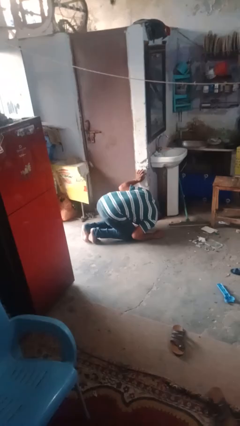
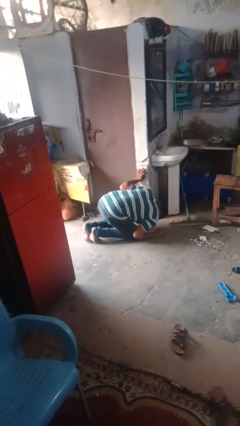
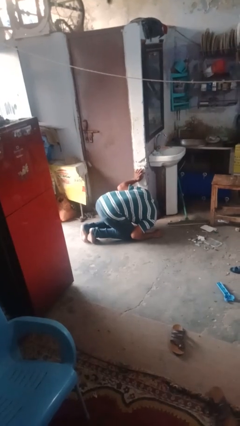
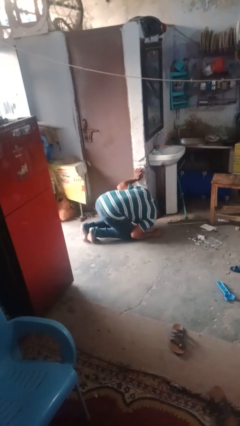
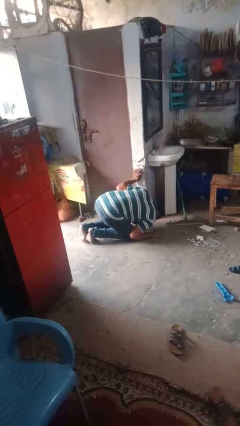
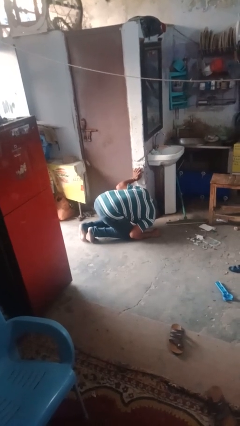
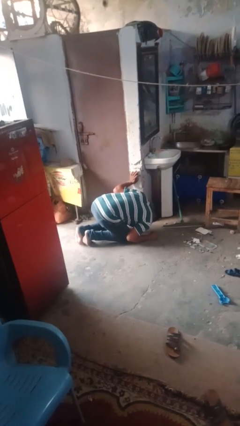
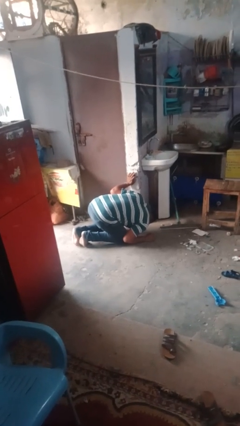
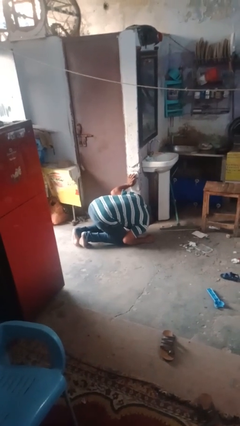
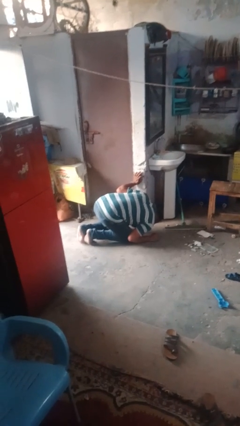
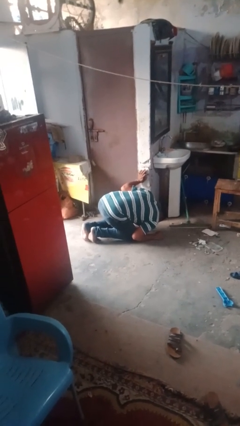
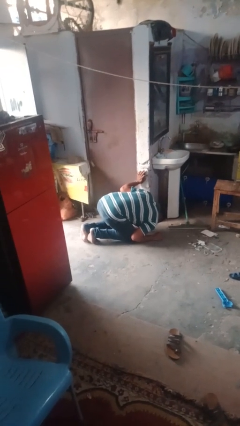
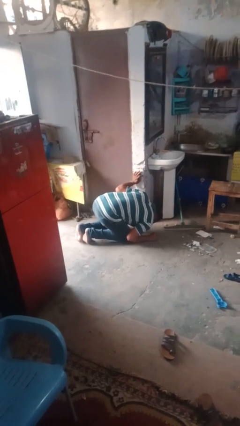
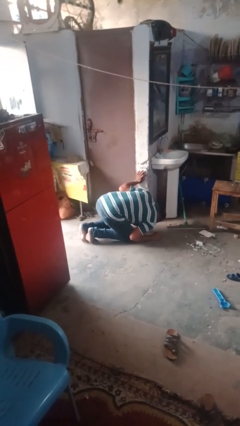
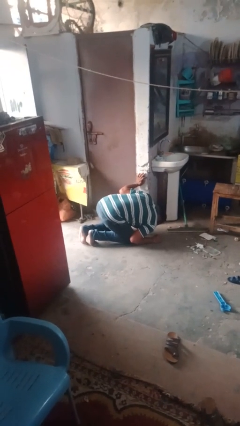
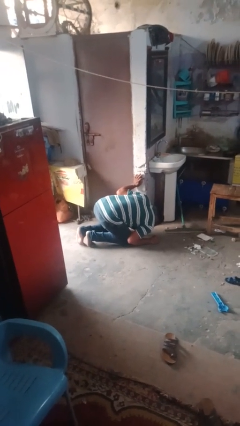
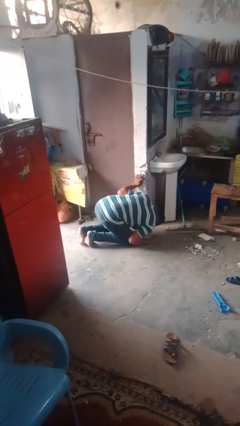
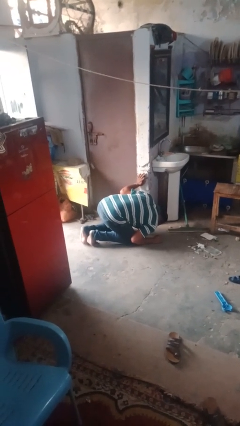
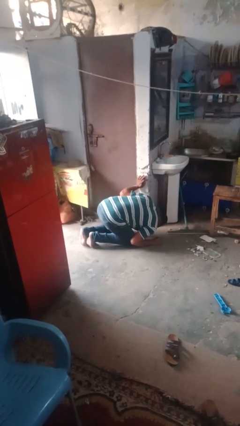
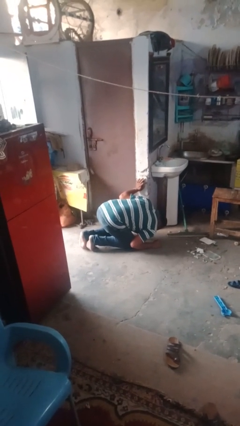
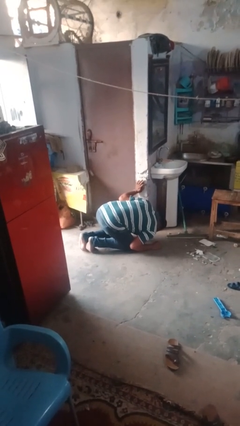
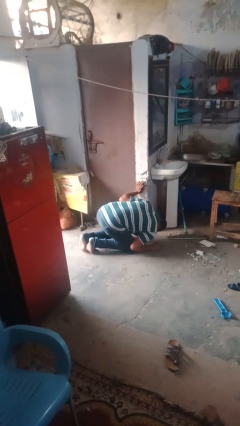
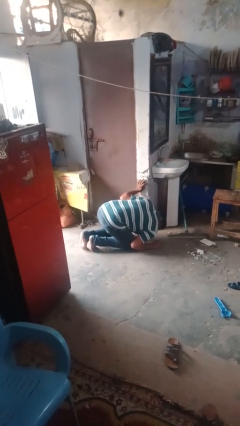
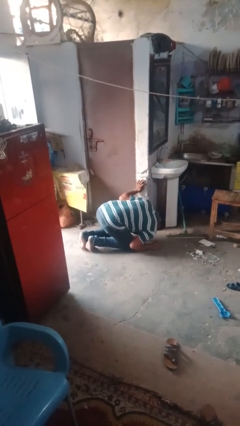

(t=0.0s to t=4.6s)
person lies down on floor

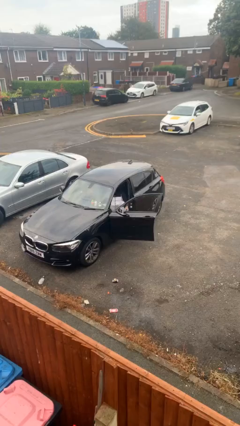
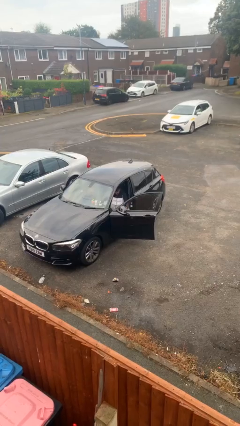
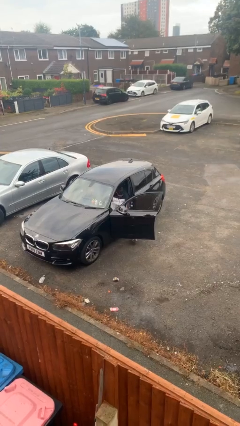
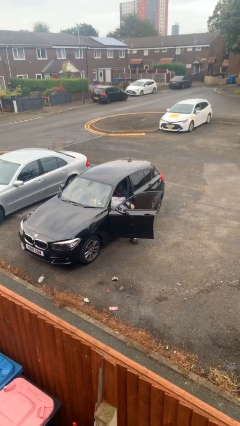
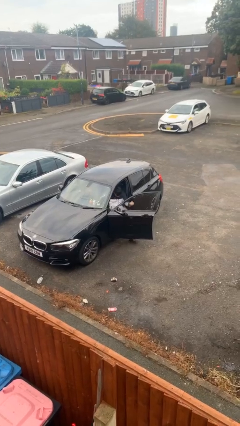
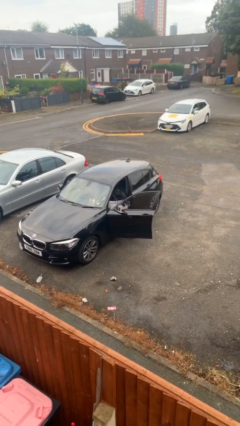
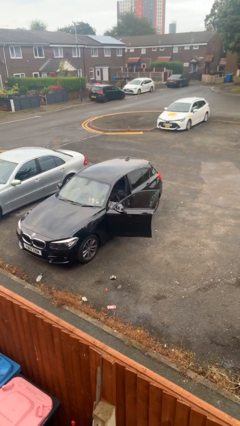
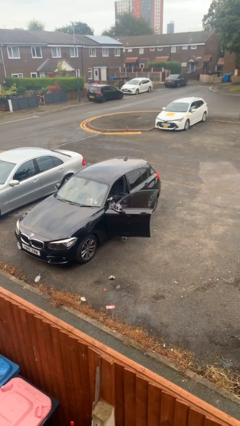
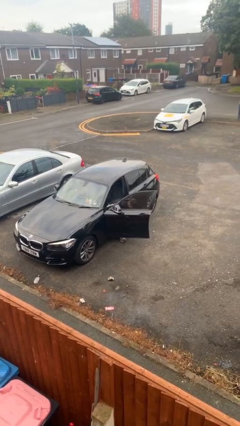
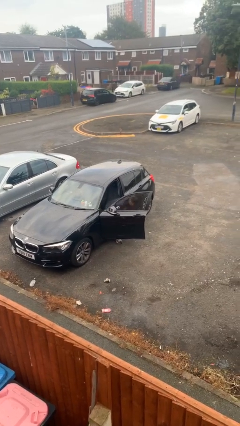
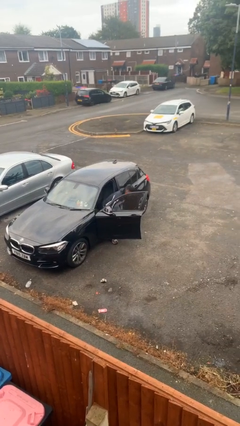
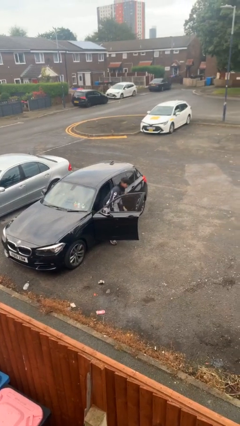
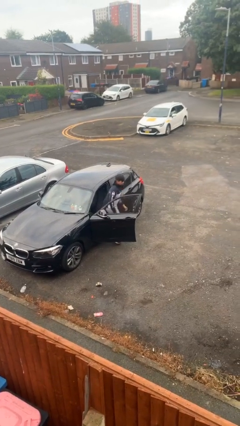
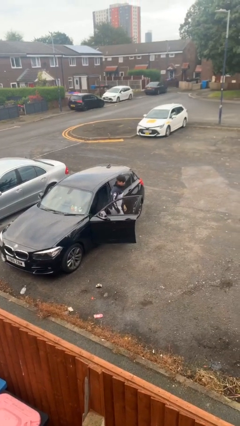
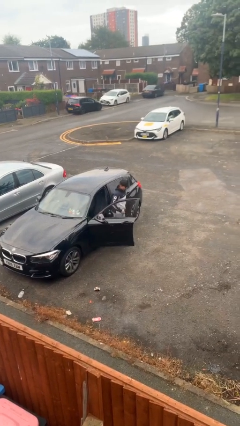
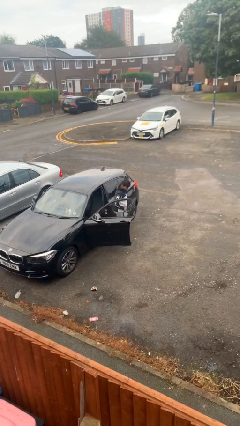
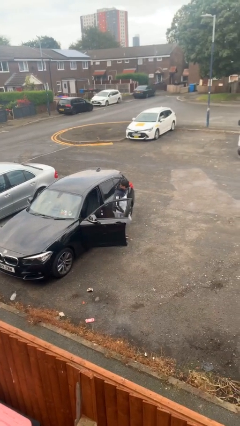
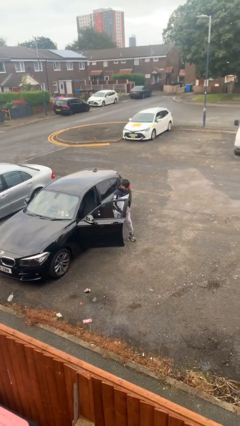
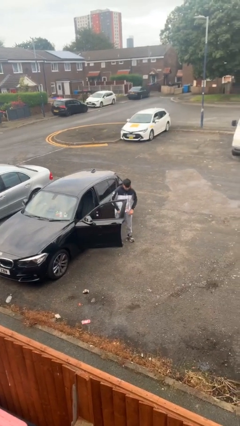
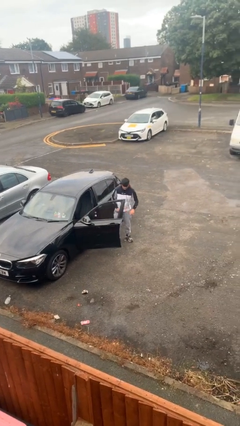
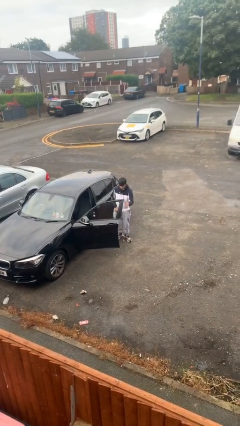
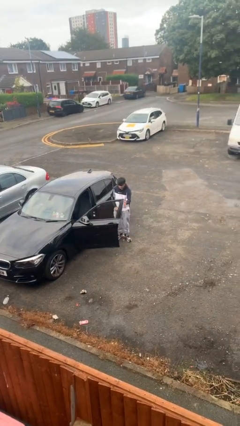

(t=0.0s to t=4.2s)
person exits car

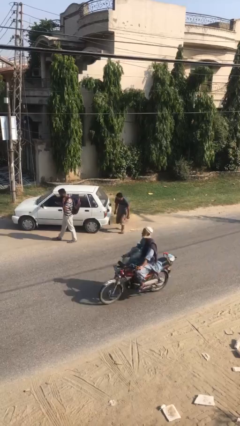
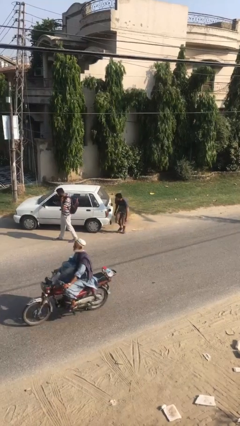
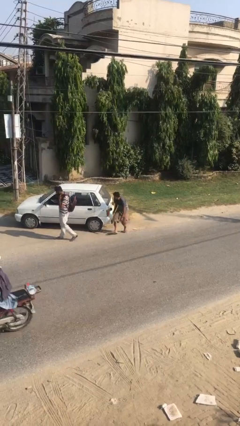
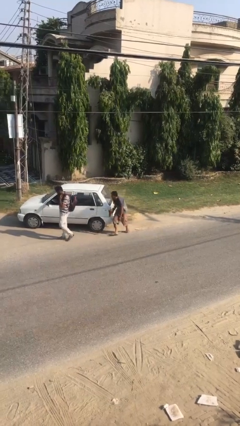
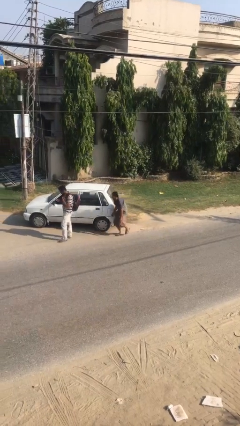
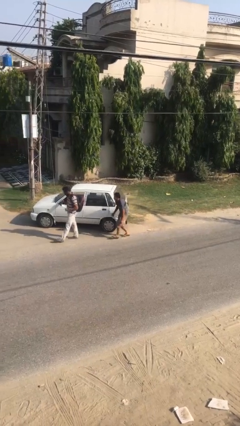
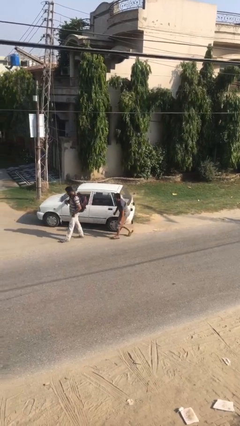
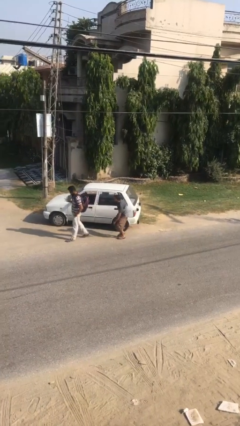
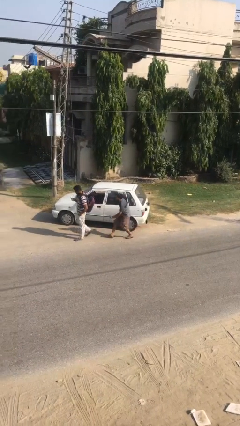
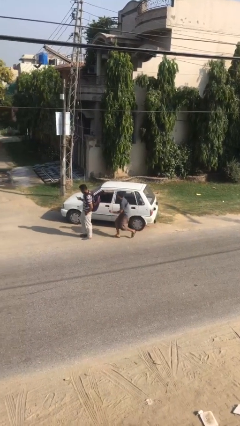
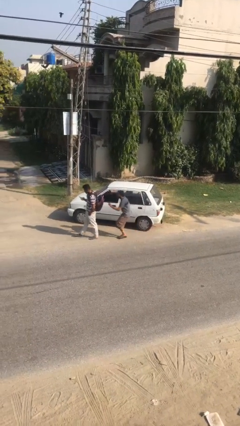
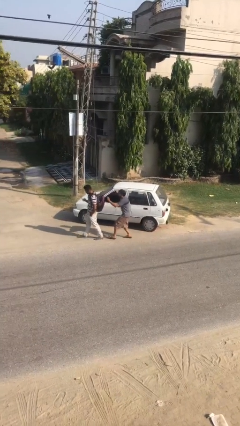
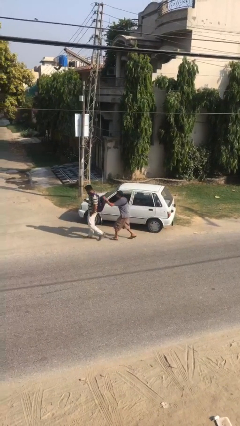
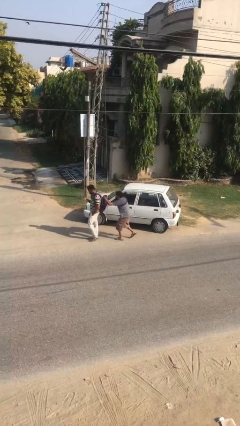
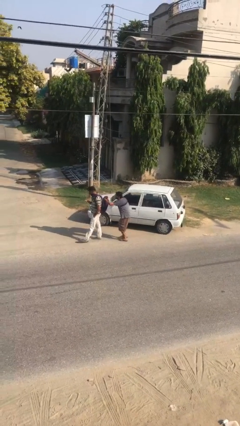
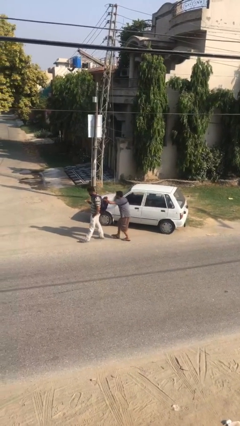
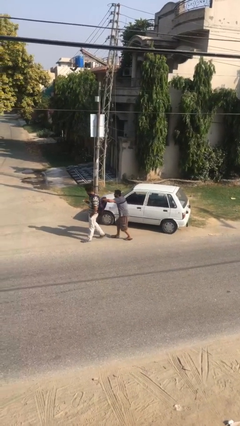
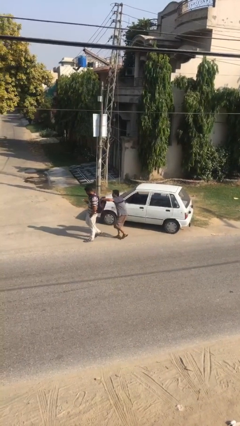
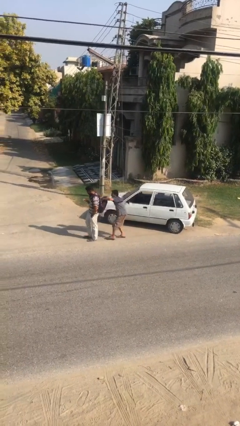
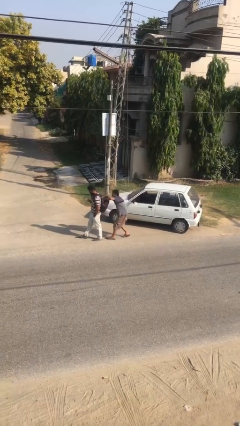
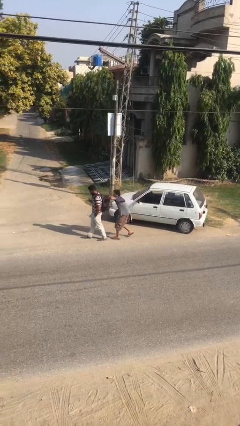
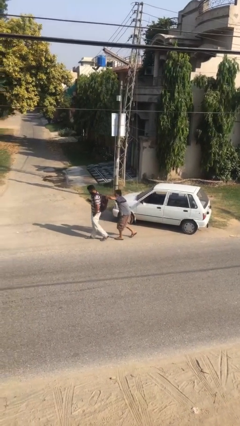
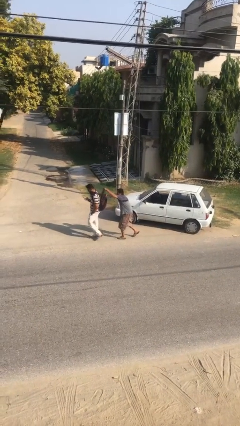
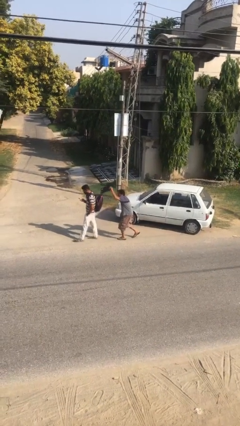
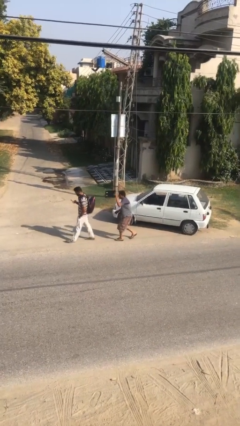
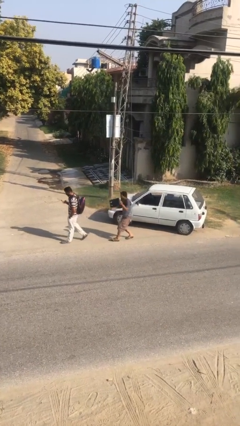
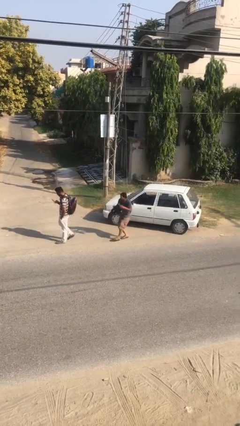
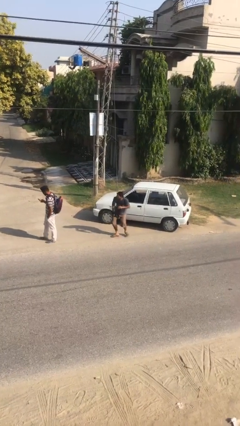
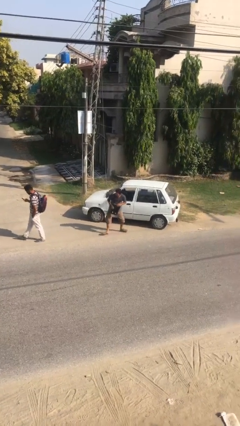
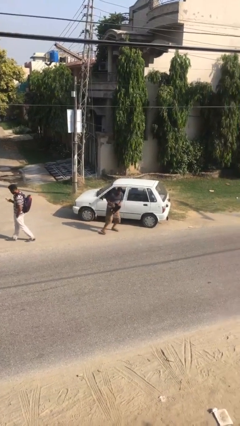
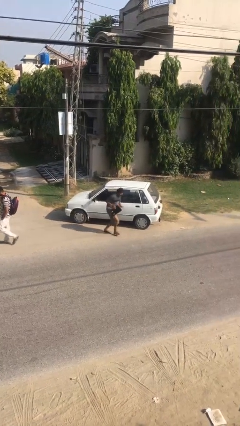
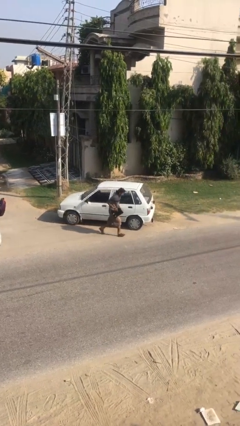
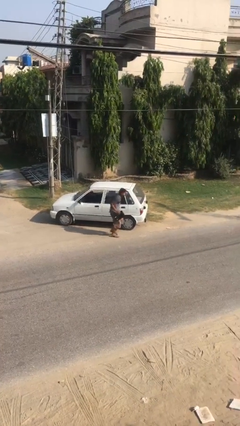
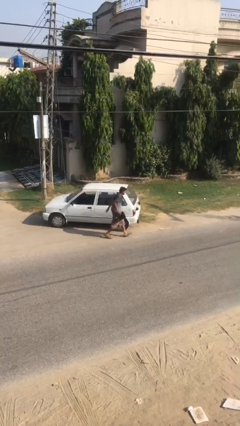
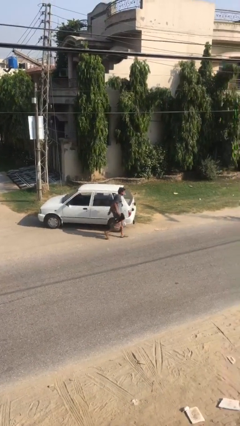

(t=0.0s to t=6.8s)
person steals object from person

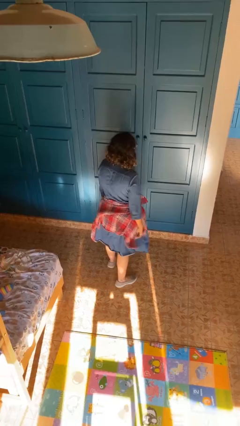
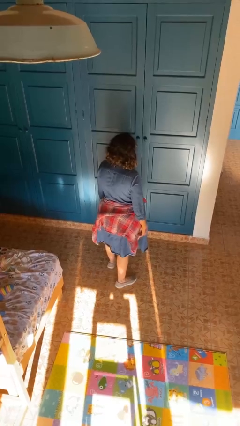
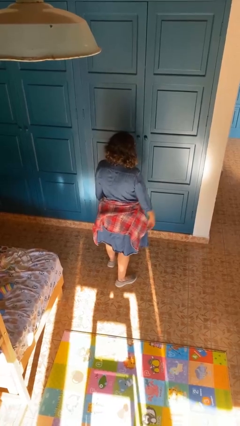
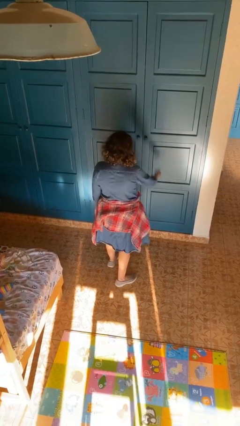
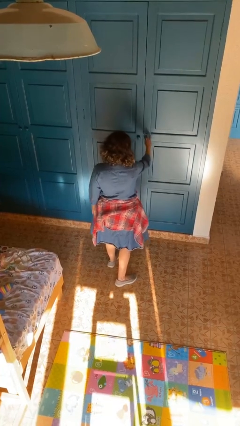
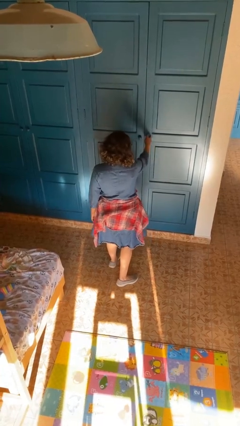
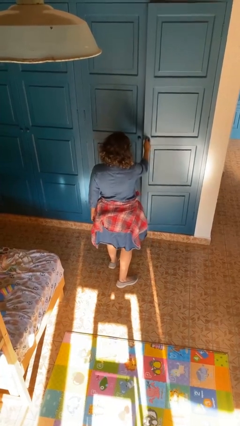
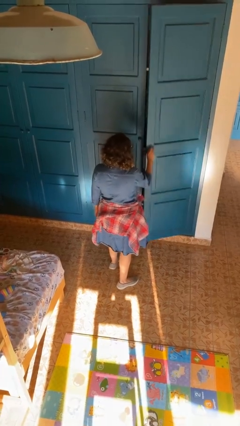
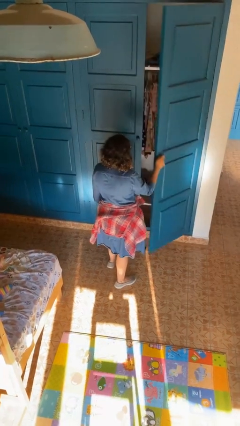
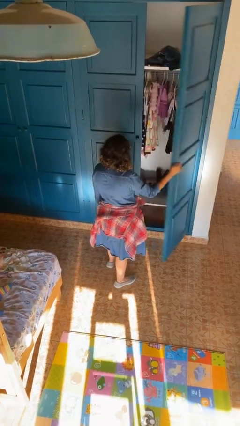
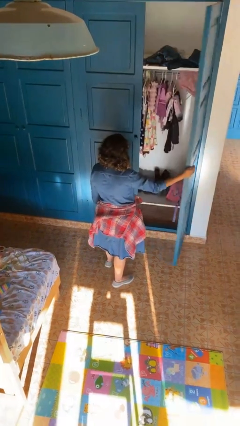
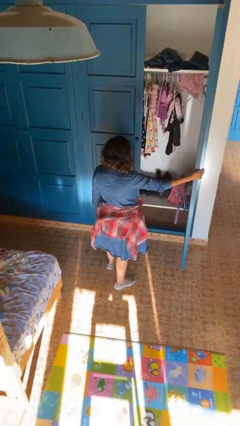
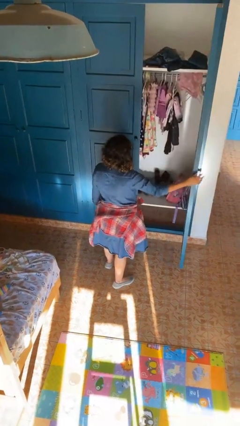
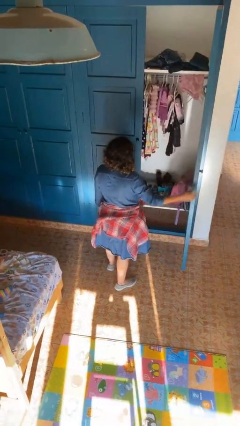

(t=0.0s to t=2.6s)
person opens closet door
